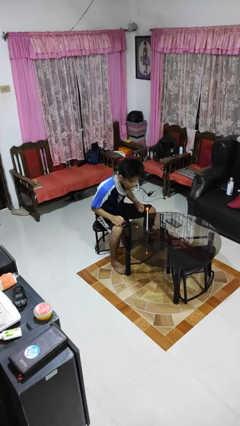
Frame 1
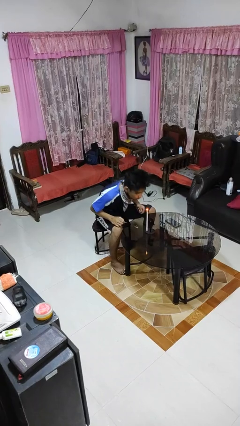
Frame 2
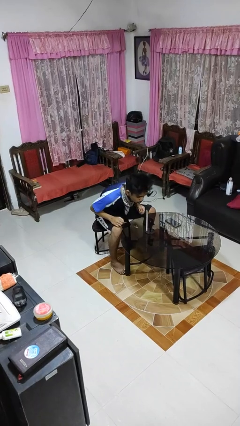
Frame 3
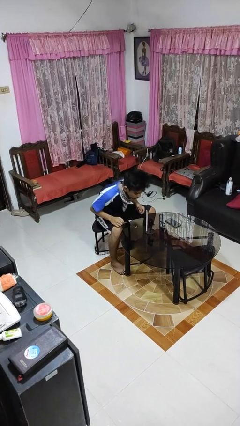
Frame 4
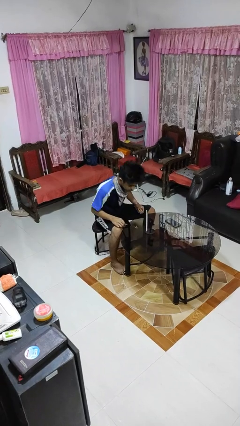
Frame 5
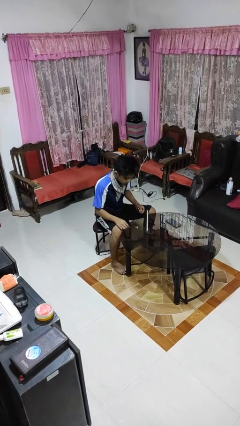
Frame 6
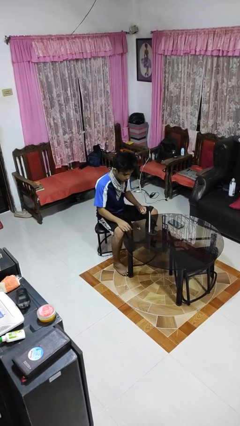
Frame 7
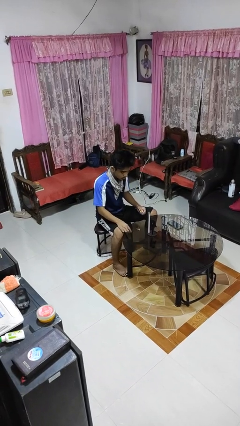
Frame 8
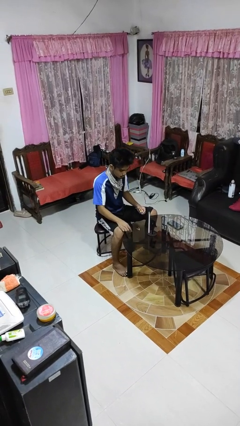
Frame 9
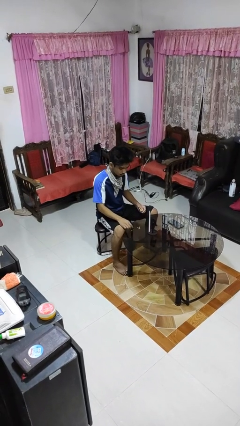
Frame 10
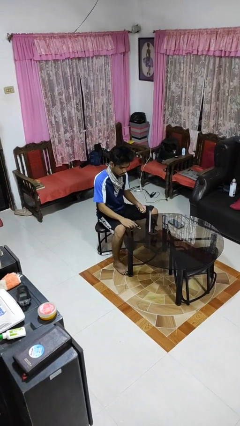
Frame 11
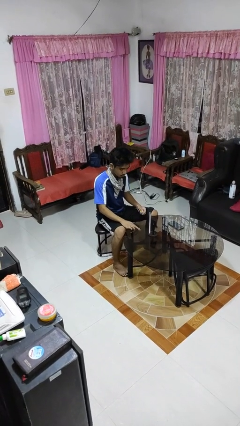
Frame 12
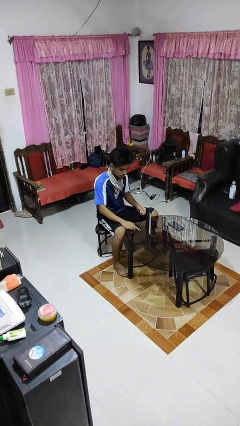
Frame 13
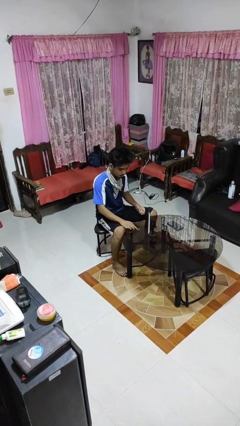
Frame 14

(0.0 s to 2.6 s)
person extinguishes candle

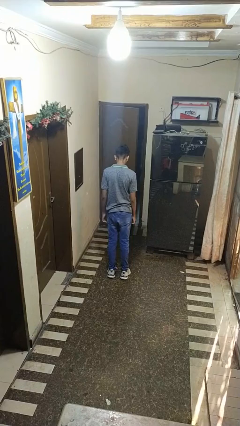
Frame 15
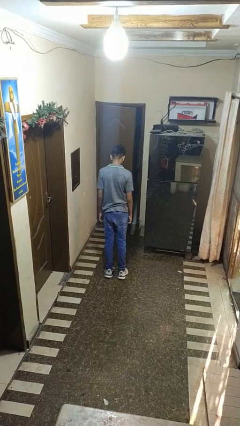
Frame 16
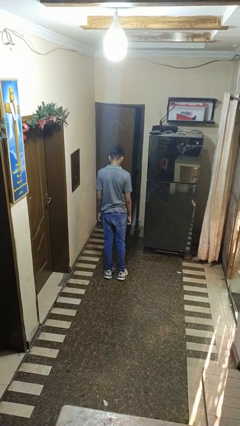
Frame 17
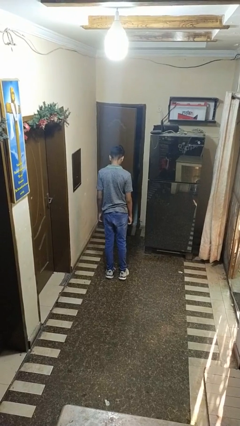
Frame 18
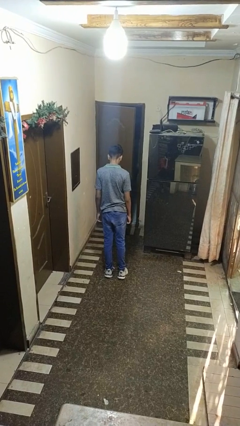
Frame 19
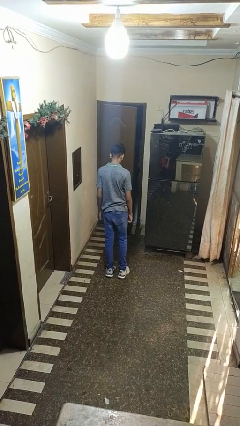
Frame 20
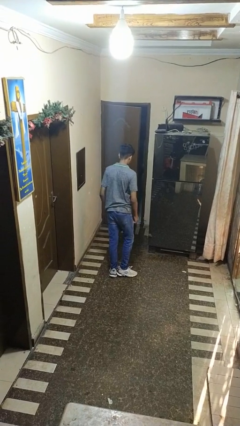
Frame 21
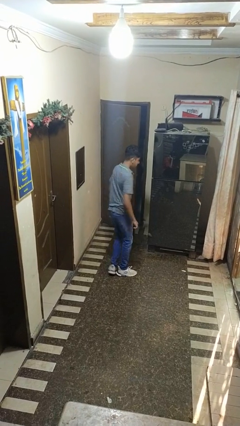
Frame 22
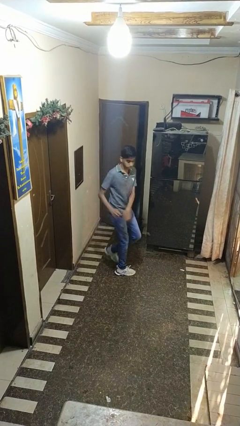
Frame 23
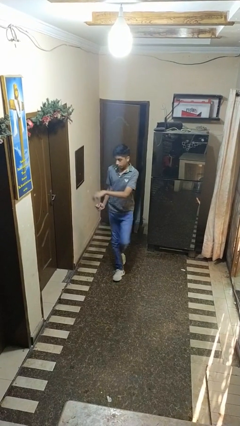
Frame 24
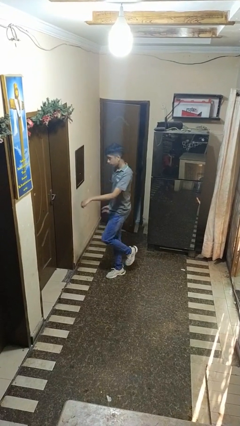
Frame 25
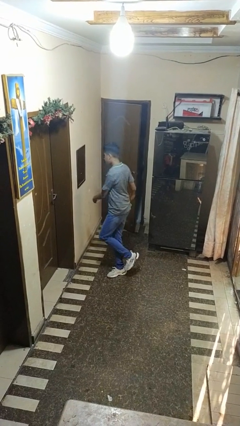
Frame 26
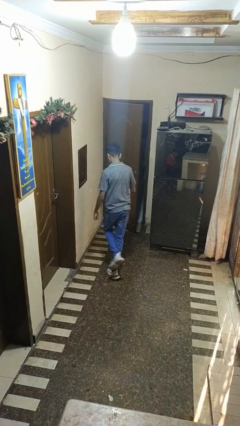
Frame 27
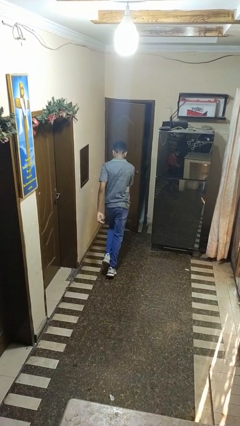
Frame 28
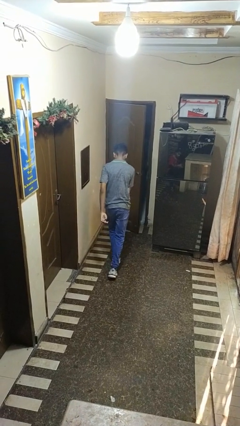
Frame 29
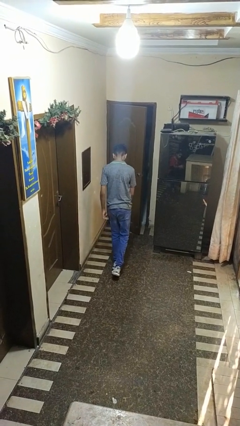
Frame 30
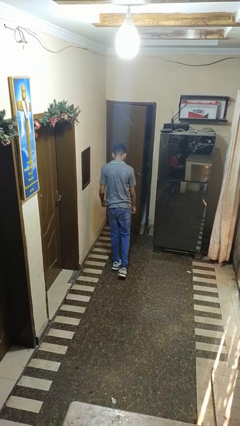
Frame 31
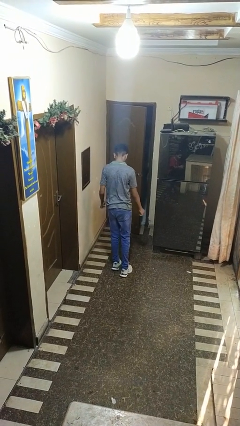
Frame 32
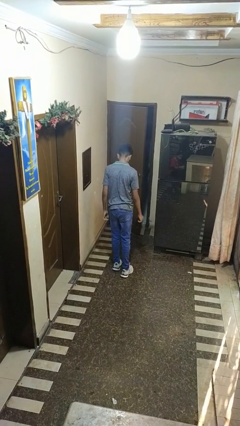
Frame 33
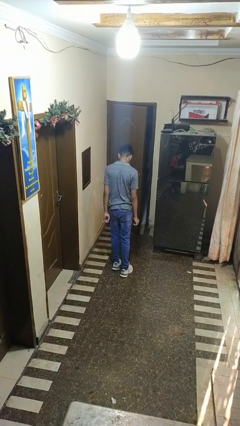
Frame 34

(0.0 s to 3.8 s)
person twirls

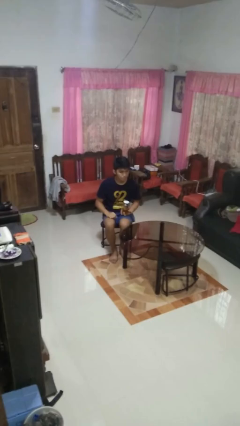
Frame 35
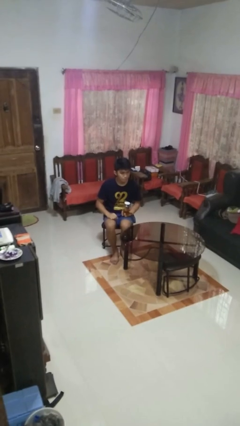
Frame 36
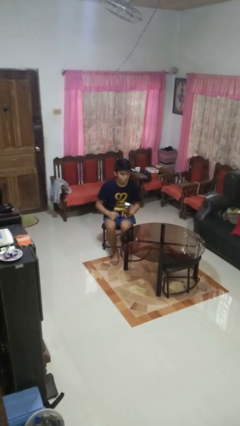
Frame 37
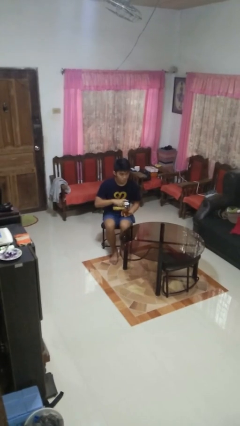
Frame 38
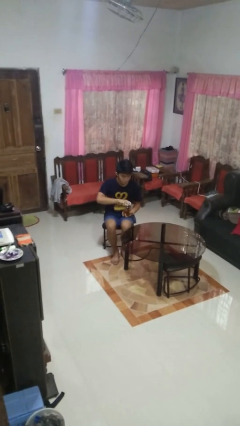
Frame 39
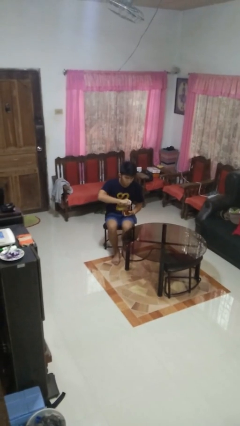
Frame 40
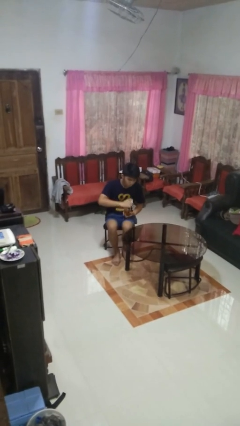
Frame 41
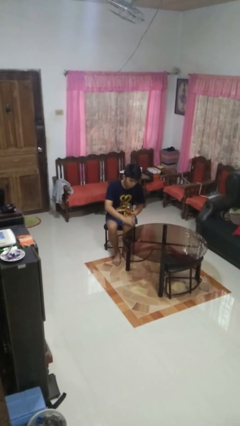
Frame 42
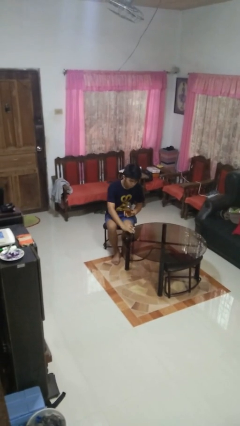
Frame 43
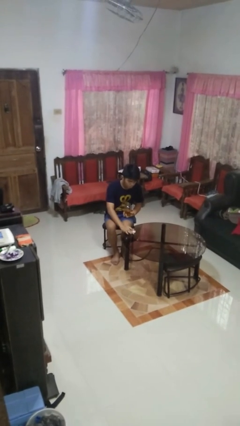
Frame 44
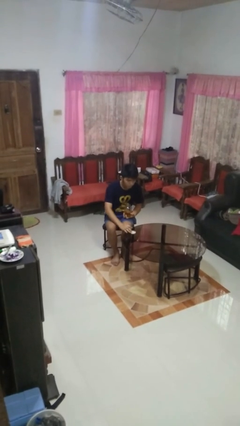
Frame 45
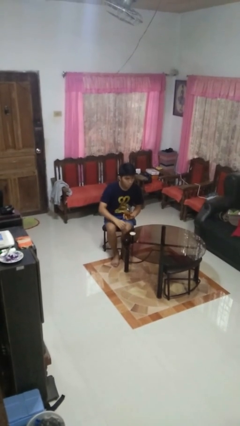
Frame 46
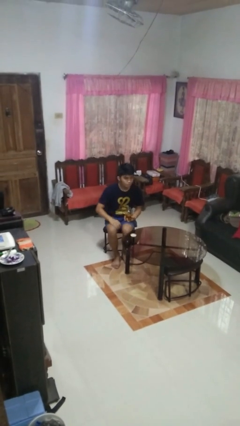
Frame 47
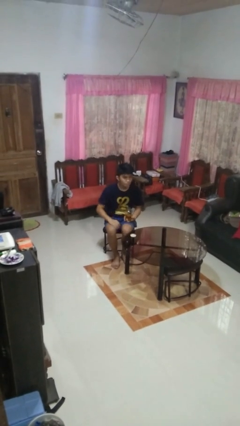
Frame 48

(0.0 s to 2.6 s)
person opens jar

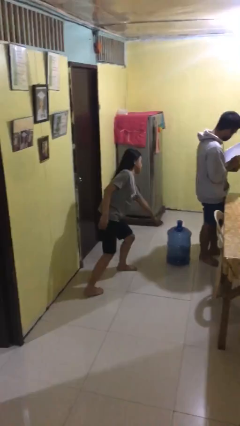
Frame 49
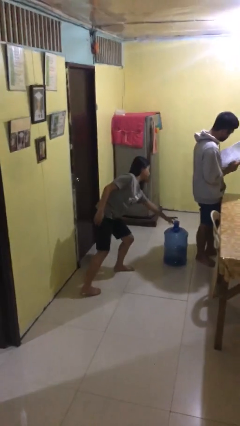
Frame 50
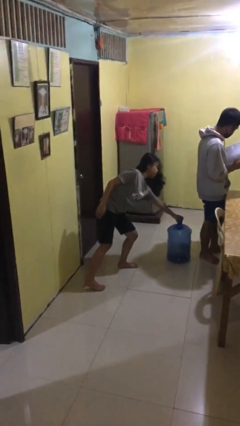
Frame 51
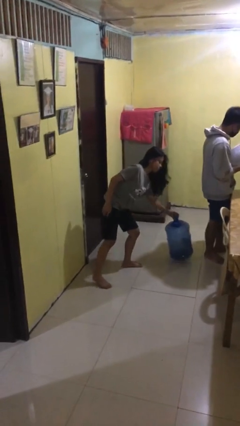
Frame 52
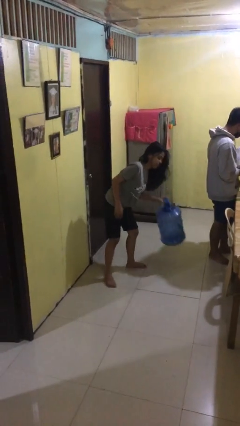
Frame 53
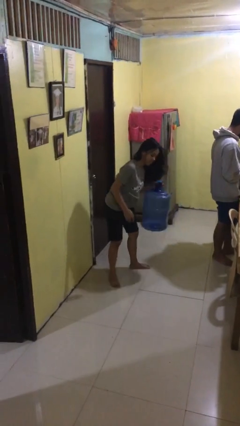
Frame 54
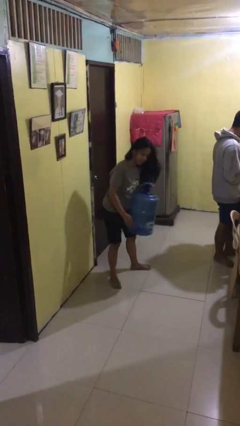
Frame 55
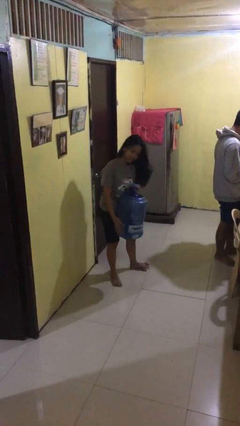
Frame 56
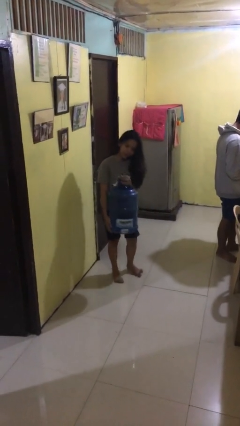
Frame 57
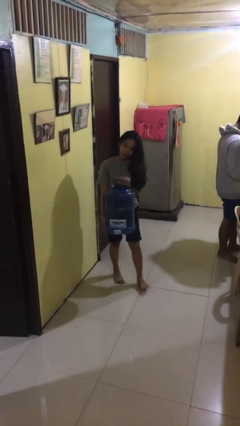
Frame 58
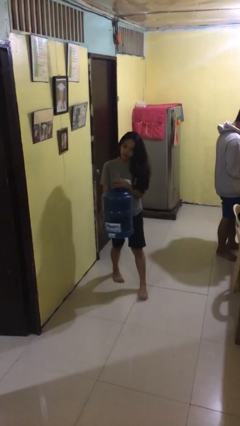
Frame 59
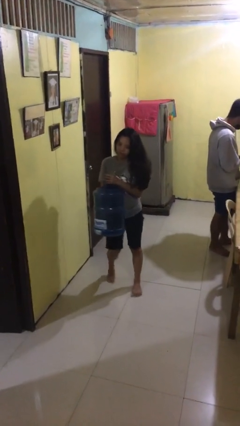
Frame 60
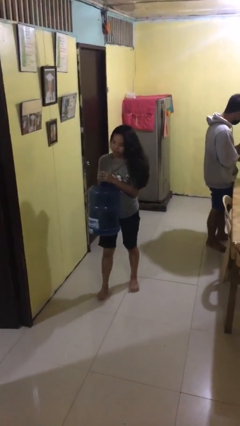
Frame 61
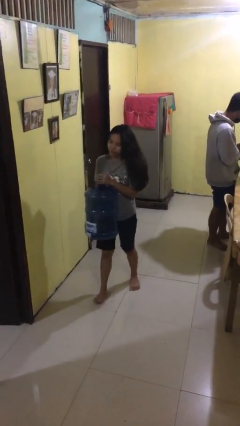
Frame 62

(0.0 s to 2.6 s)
person steals object from person

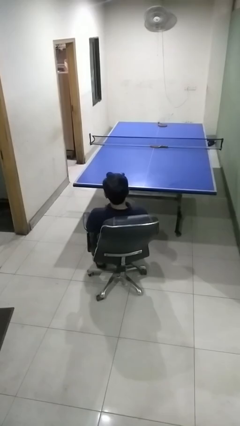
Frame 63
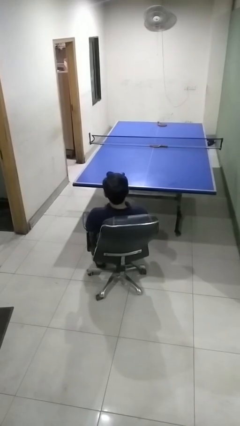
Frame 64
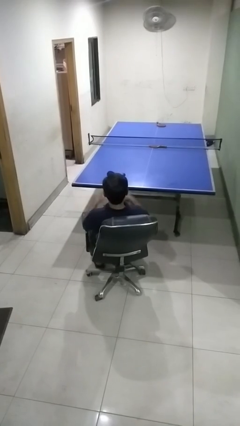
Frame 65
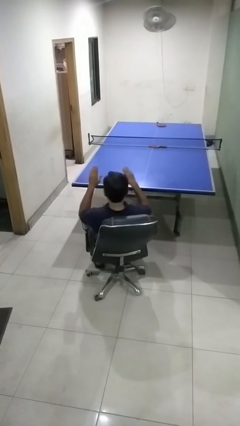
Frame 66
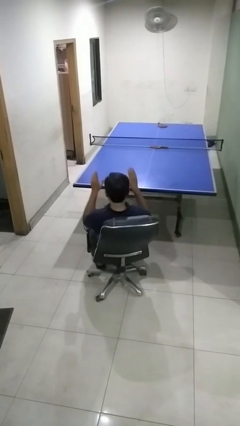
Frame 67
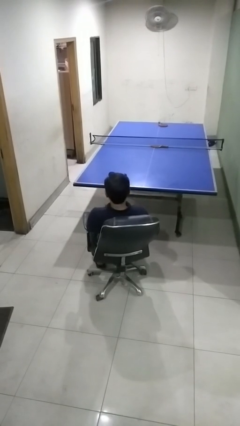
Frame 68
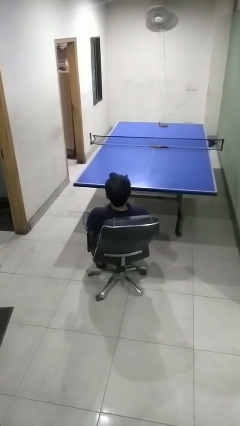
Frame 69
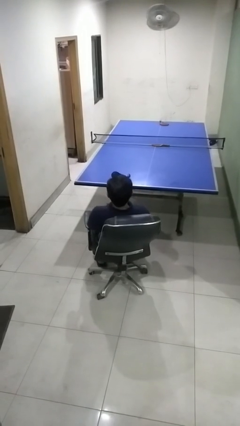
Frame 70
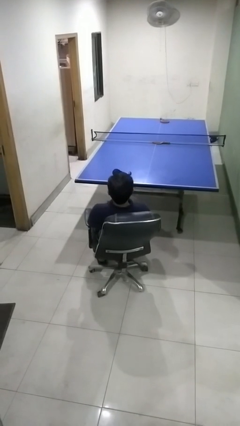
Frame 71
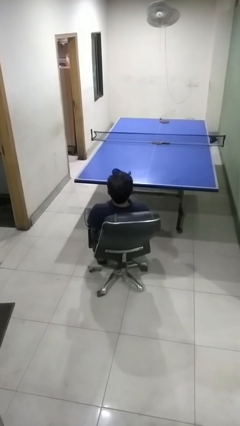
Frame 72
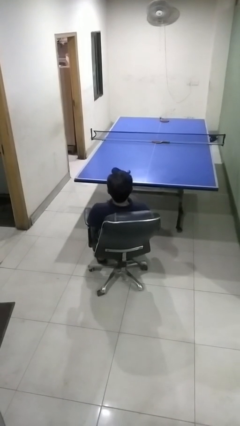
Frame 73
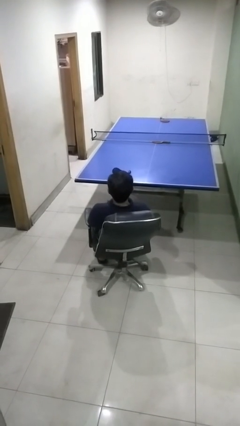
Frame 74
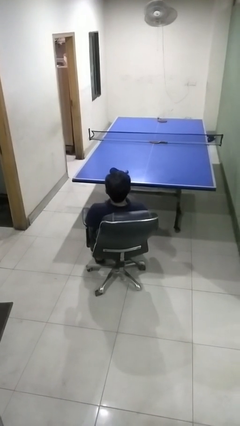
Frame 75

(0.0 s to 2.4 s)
person slaps hands on thighs

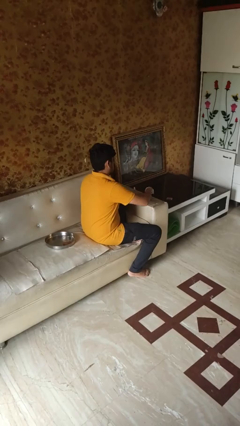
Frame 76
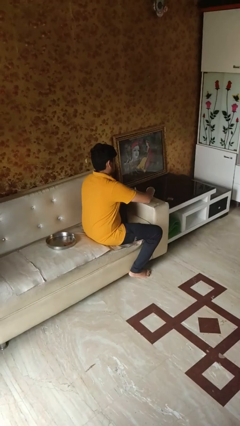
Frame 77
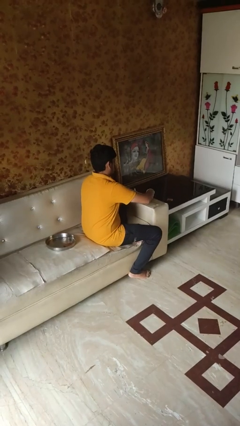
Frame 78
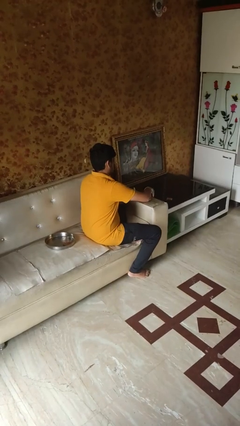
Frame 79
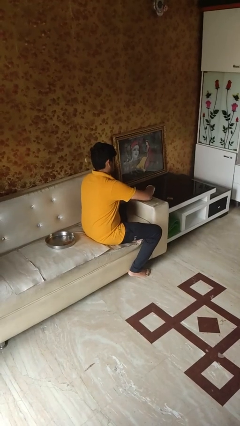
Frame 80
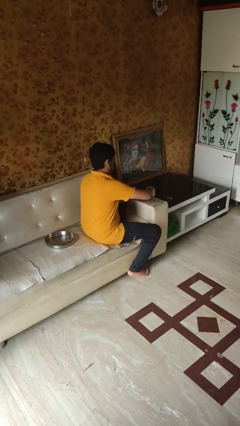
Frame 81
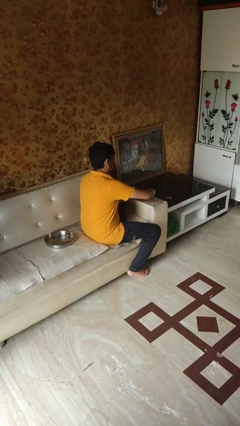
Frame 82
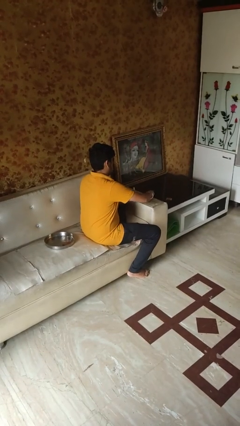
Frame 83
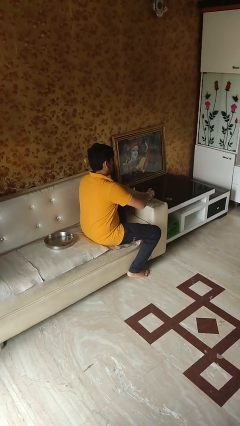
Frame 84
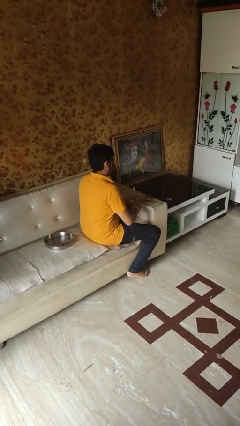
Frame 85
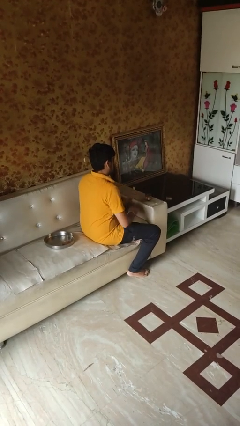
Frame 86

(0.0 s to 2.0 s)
person closes jar

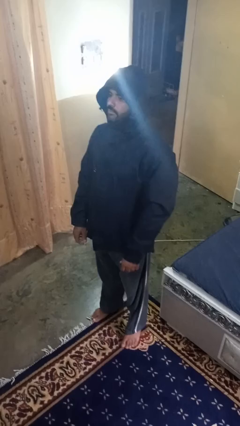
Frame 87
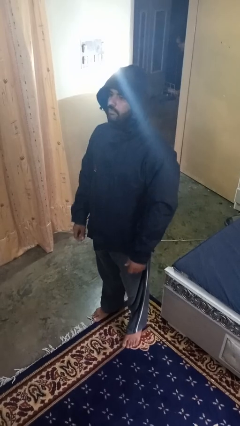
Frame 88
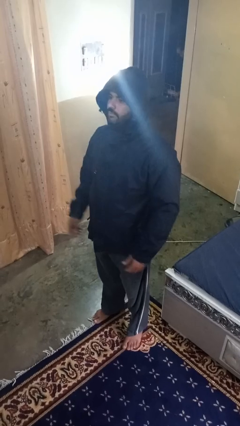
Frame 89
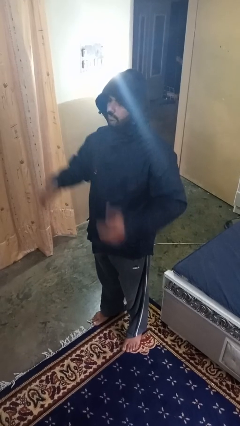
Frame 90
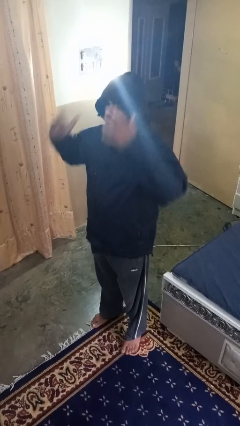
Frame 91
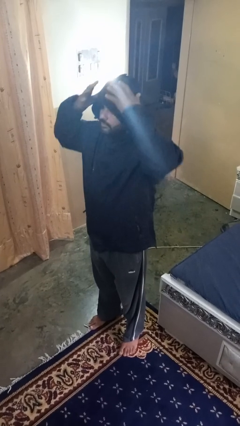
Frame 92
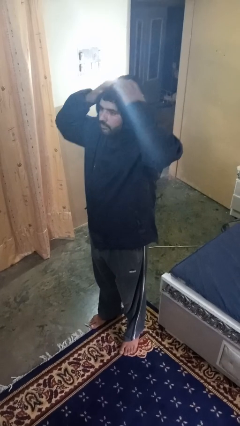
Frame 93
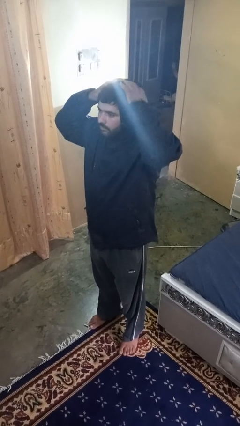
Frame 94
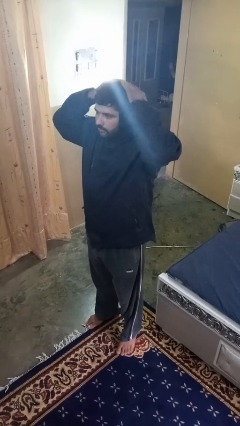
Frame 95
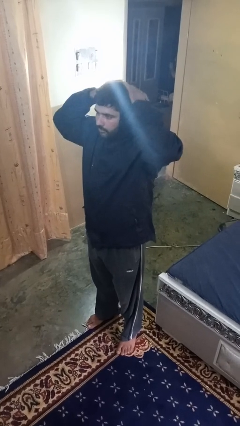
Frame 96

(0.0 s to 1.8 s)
person takes off hoodie
